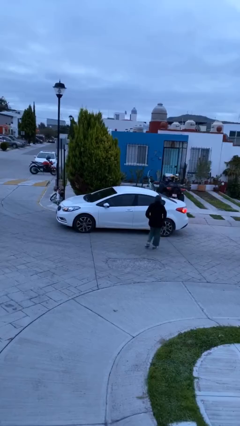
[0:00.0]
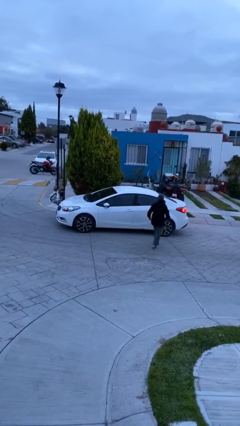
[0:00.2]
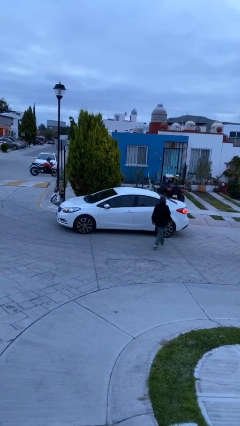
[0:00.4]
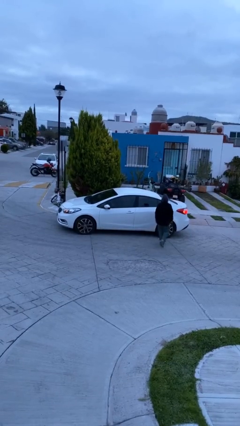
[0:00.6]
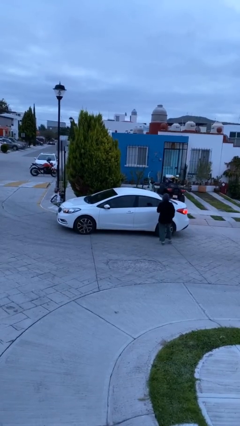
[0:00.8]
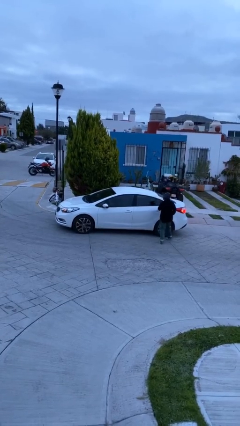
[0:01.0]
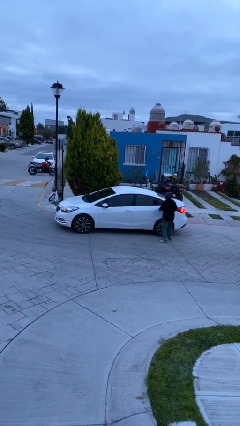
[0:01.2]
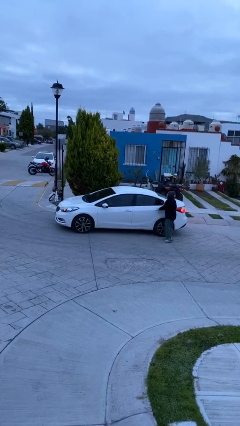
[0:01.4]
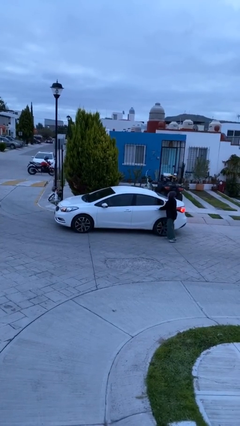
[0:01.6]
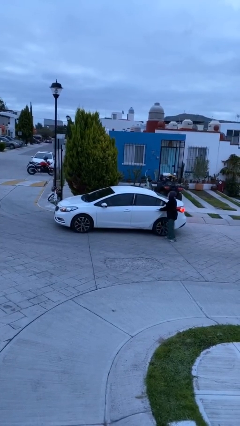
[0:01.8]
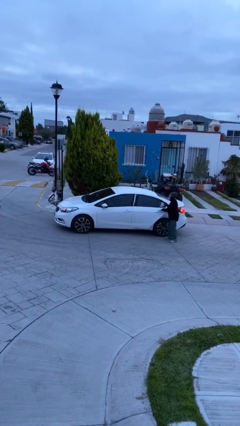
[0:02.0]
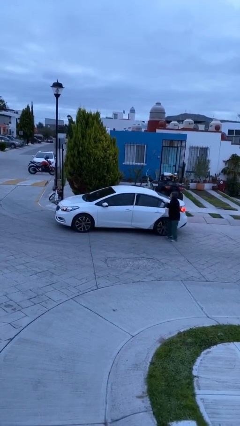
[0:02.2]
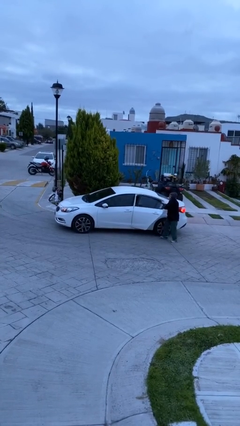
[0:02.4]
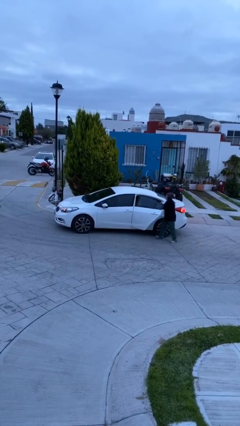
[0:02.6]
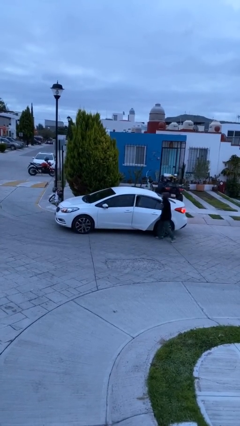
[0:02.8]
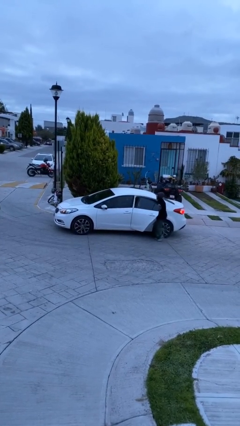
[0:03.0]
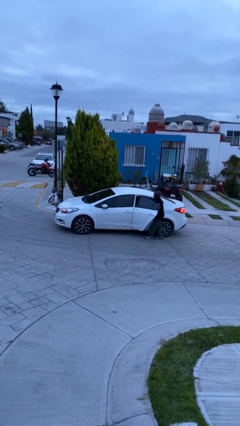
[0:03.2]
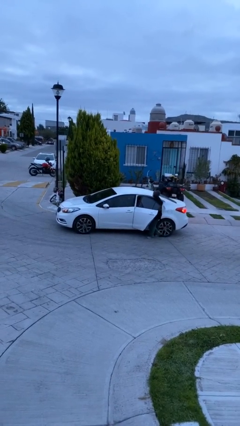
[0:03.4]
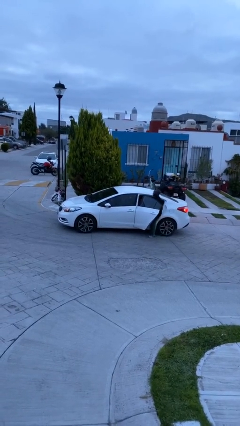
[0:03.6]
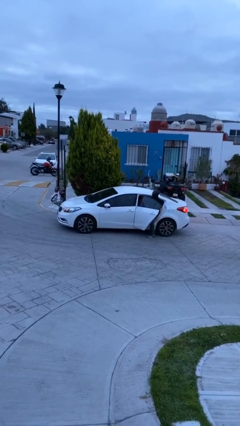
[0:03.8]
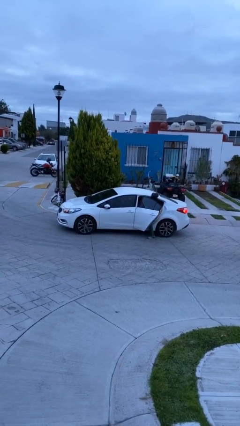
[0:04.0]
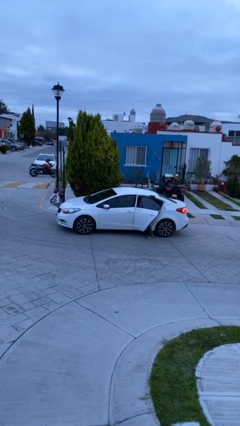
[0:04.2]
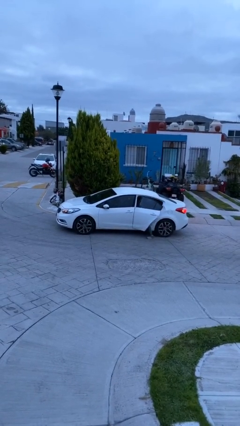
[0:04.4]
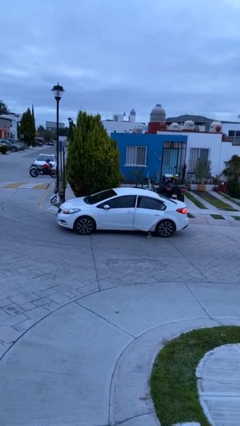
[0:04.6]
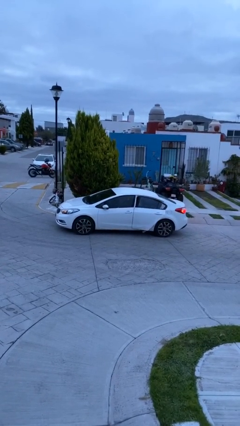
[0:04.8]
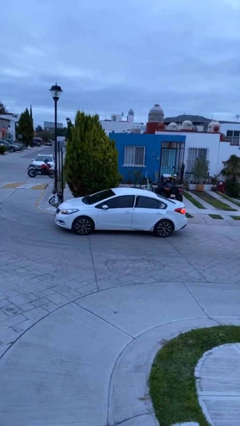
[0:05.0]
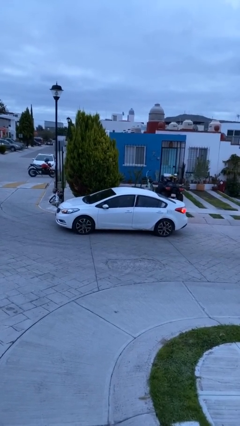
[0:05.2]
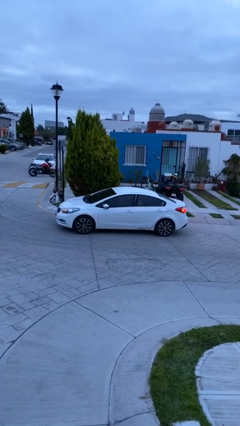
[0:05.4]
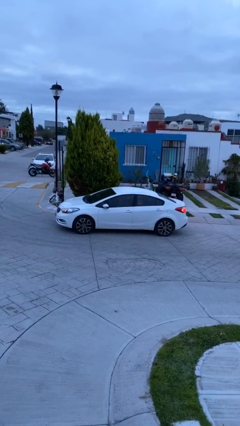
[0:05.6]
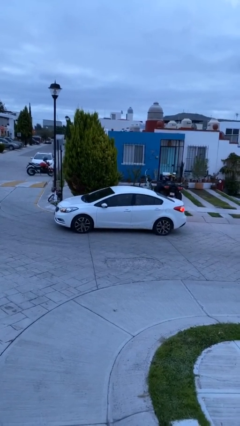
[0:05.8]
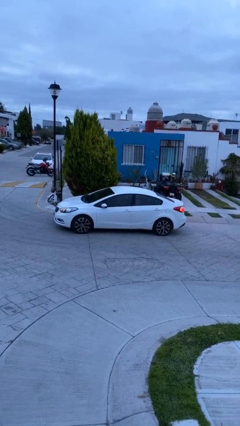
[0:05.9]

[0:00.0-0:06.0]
car picks up person

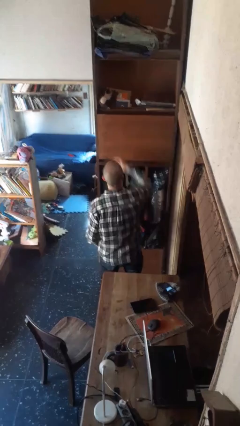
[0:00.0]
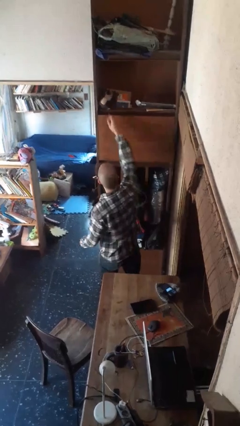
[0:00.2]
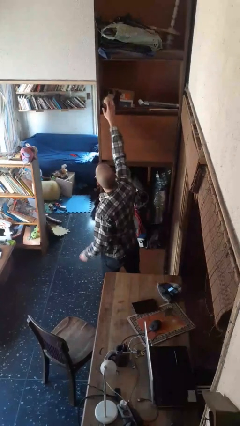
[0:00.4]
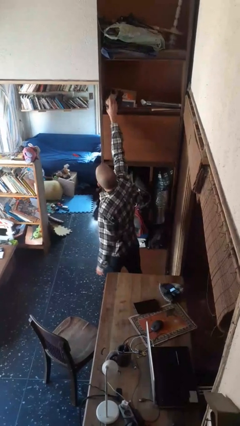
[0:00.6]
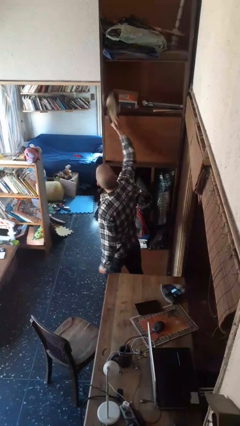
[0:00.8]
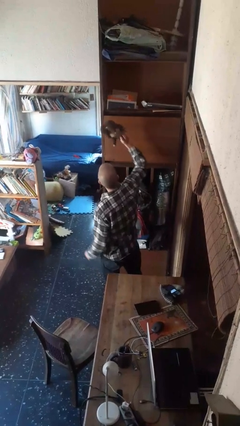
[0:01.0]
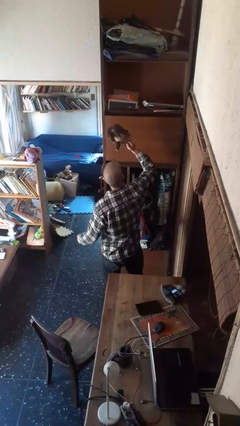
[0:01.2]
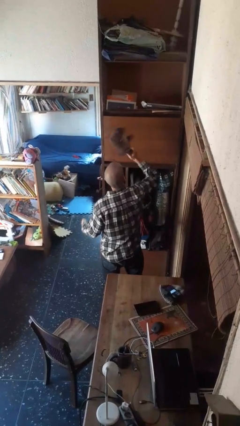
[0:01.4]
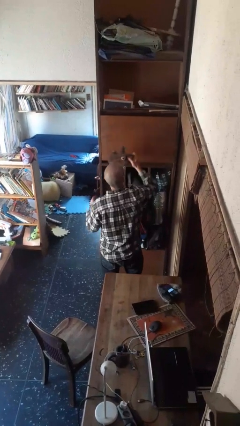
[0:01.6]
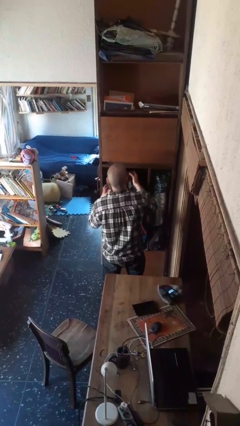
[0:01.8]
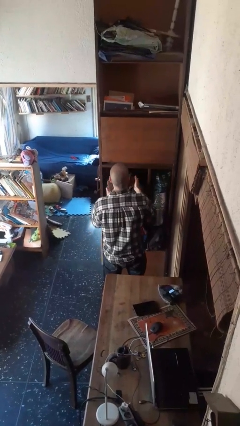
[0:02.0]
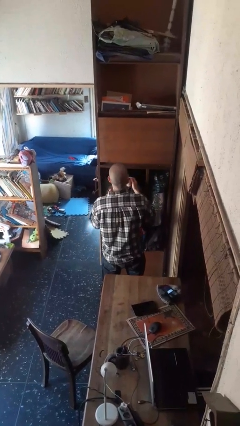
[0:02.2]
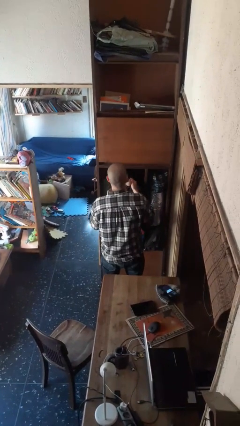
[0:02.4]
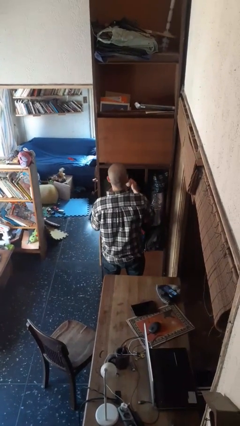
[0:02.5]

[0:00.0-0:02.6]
person picks up object from shelf

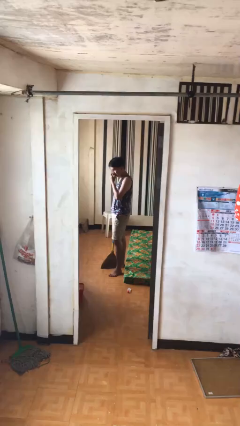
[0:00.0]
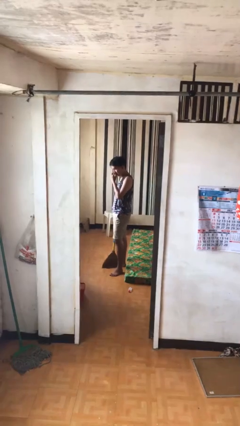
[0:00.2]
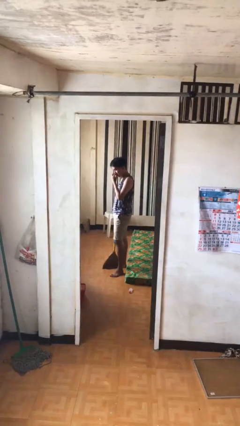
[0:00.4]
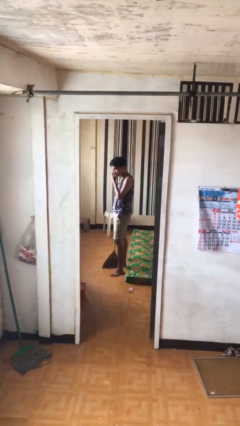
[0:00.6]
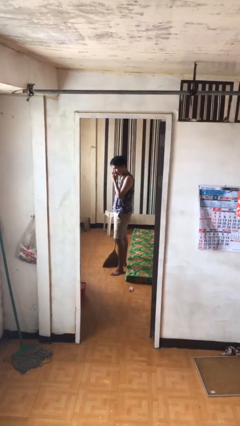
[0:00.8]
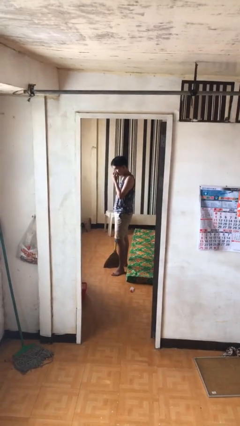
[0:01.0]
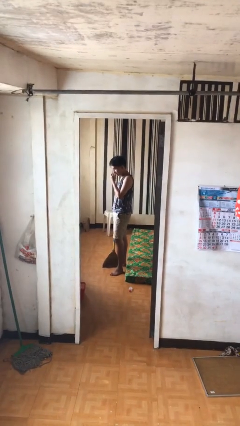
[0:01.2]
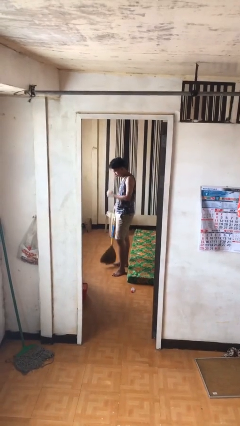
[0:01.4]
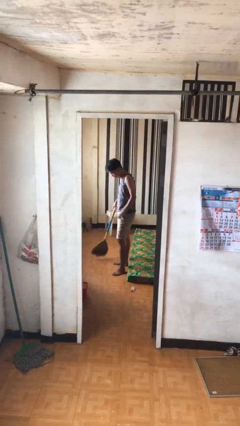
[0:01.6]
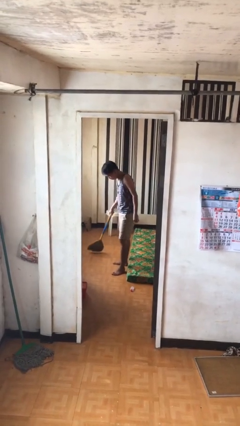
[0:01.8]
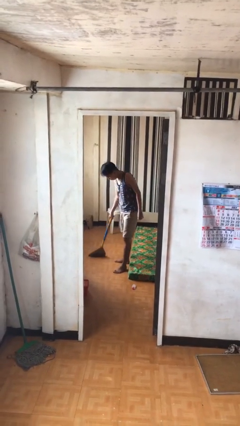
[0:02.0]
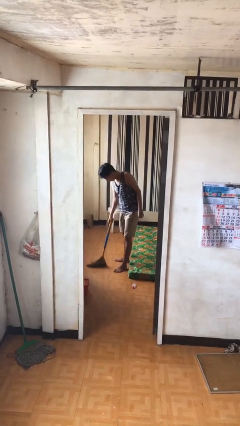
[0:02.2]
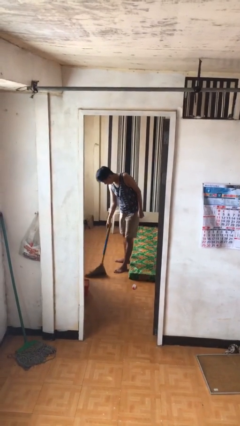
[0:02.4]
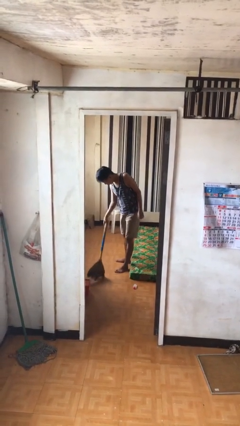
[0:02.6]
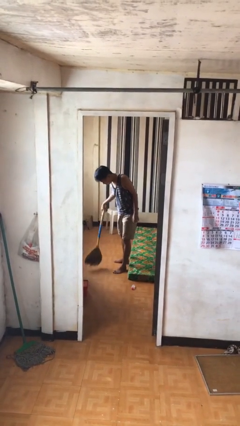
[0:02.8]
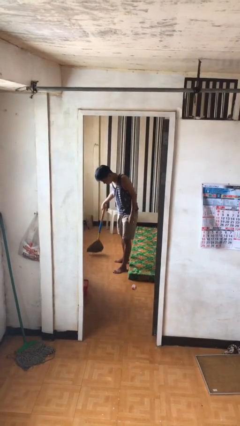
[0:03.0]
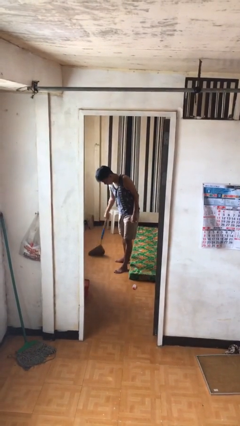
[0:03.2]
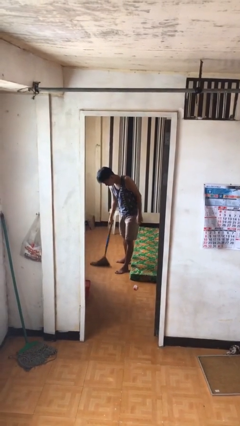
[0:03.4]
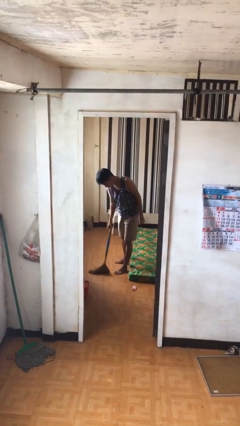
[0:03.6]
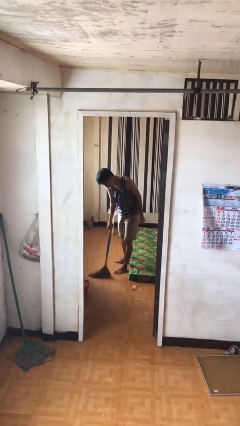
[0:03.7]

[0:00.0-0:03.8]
person sweeps floor

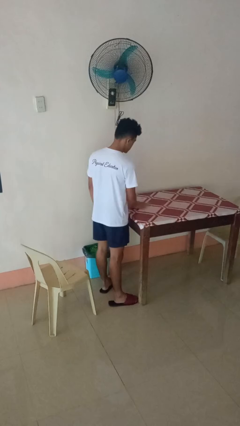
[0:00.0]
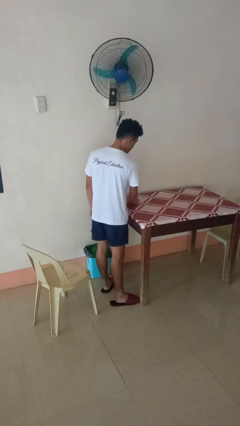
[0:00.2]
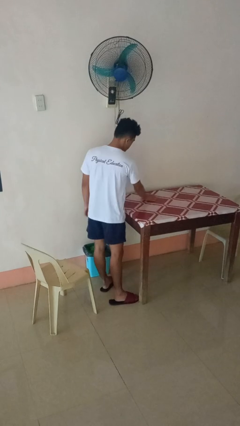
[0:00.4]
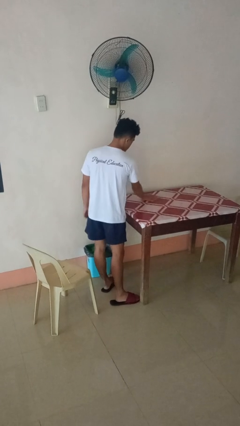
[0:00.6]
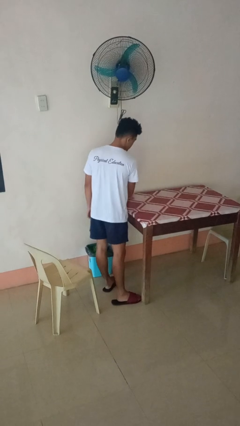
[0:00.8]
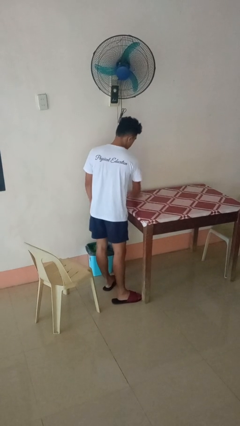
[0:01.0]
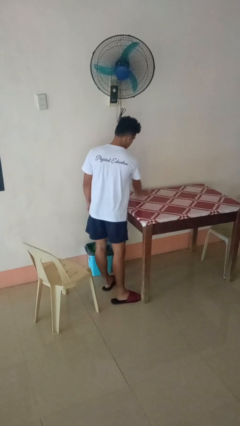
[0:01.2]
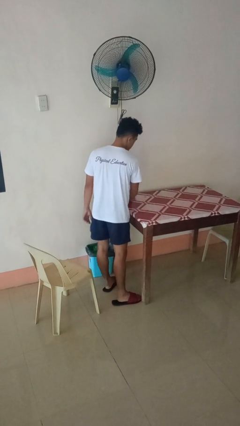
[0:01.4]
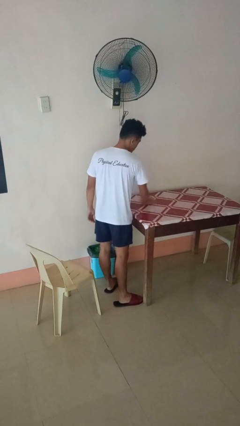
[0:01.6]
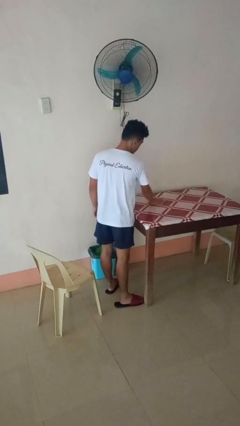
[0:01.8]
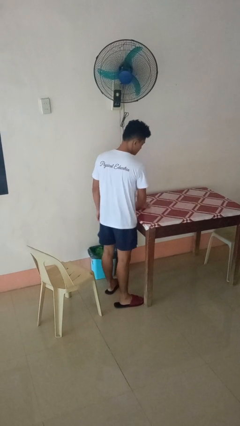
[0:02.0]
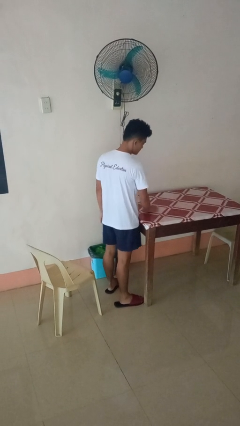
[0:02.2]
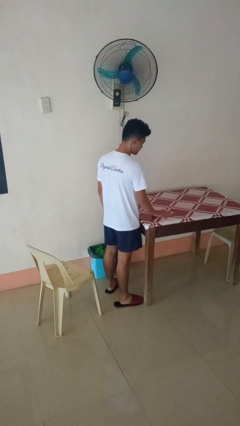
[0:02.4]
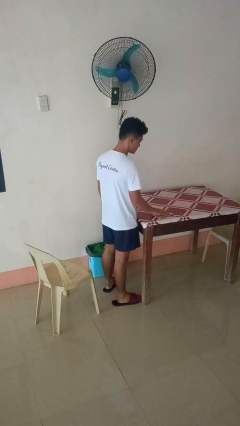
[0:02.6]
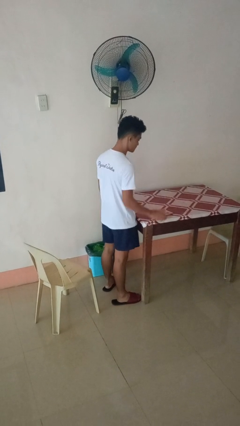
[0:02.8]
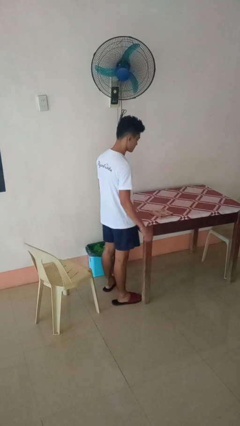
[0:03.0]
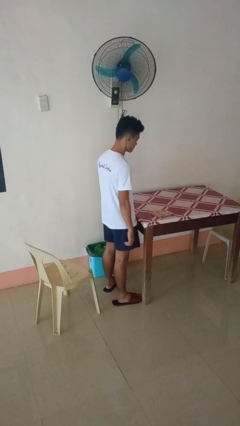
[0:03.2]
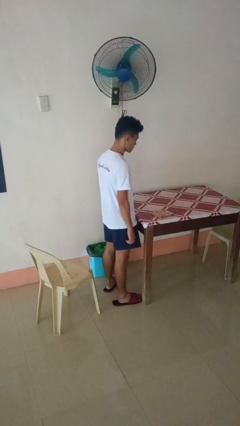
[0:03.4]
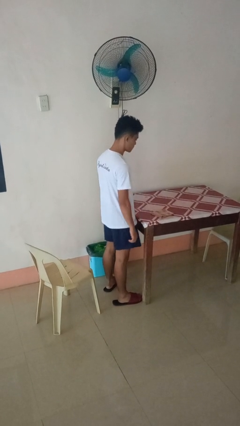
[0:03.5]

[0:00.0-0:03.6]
person cleans table with rag

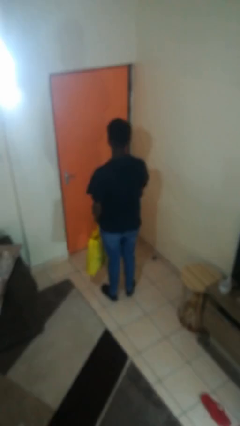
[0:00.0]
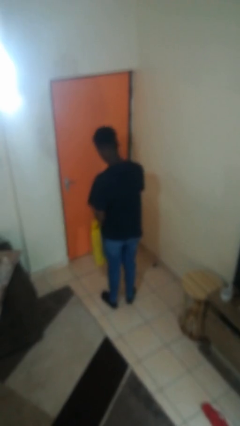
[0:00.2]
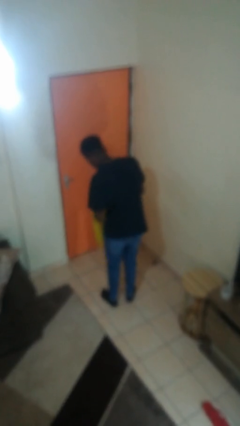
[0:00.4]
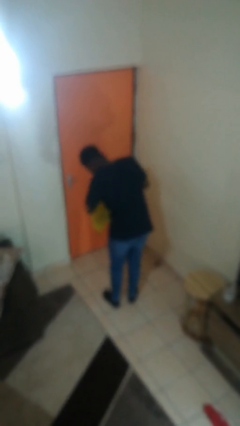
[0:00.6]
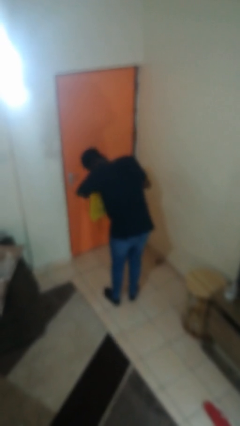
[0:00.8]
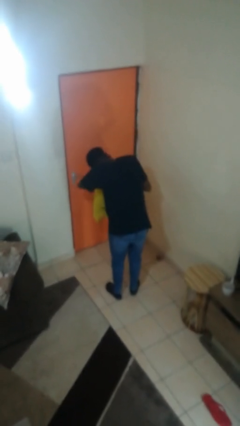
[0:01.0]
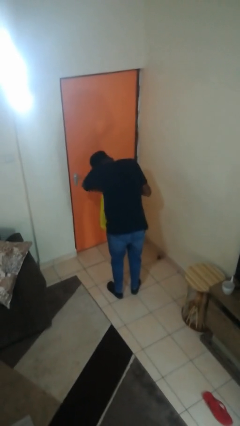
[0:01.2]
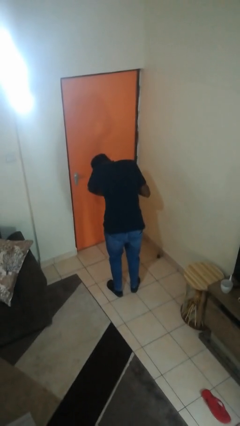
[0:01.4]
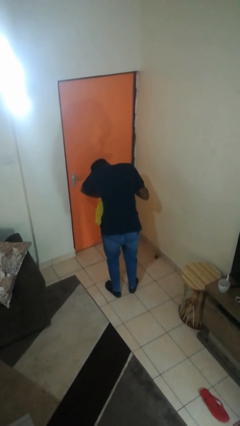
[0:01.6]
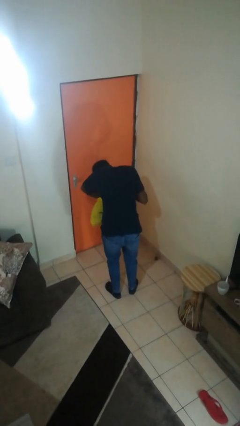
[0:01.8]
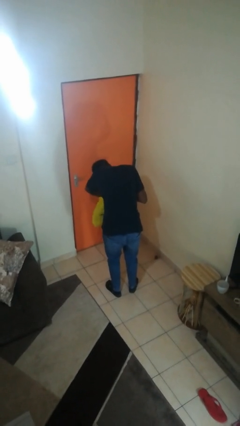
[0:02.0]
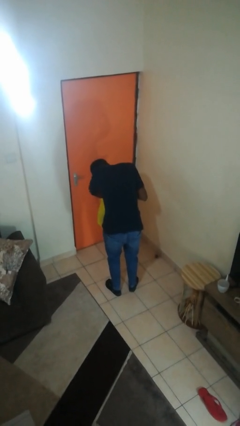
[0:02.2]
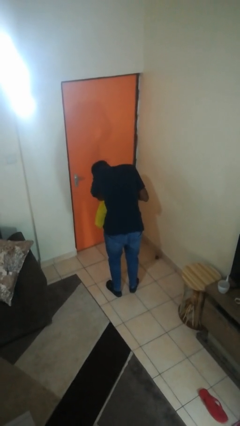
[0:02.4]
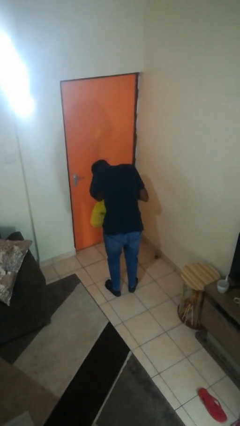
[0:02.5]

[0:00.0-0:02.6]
person searches in bag
